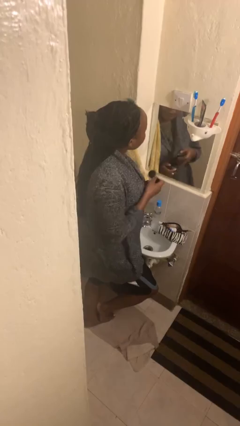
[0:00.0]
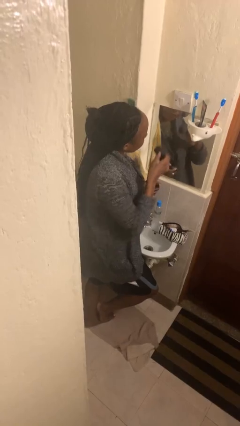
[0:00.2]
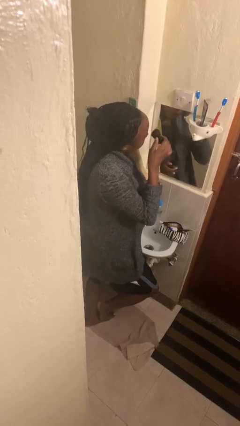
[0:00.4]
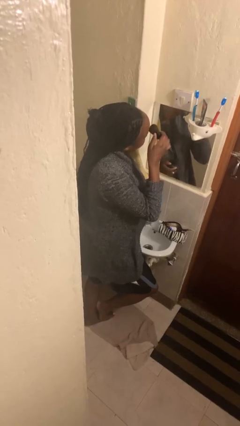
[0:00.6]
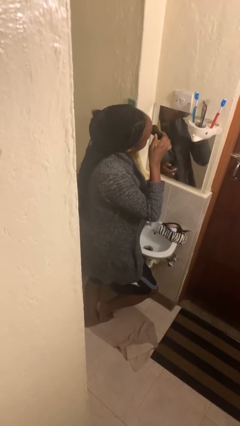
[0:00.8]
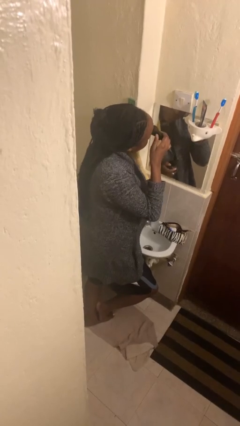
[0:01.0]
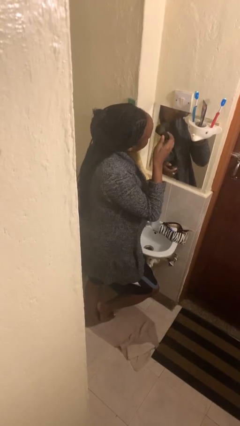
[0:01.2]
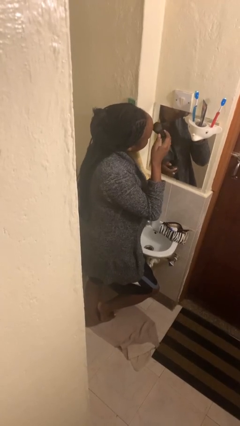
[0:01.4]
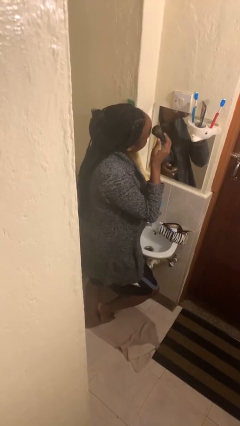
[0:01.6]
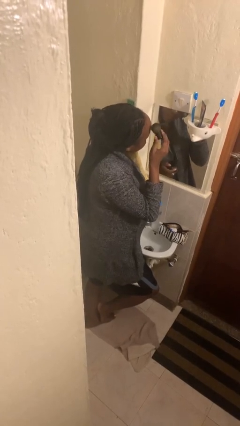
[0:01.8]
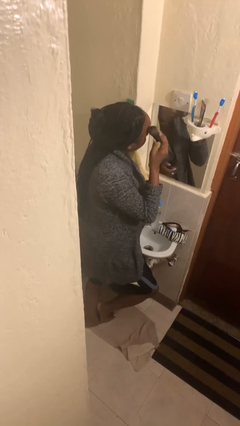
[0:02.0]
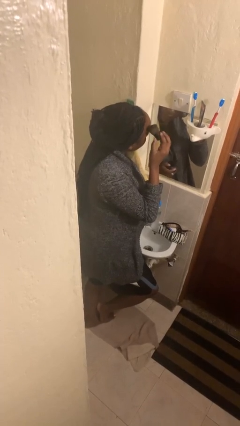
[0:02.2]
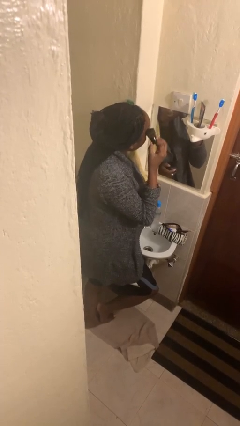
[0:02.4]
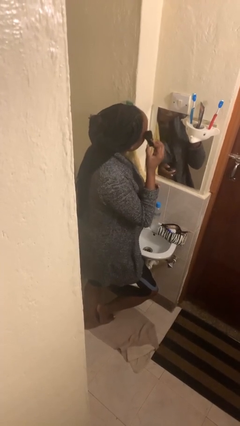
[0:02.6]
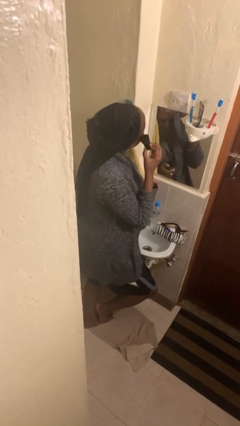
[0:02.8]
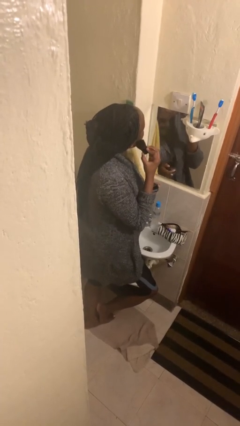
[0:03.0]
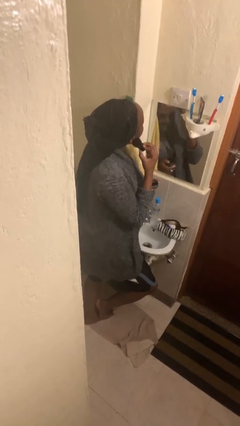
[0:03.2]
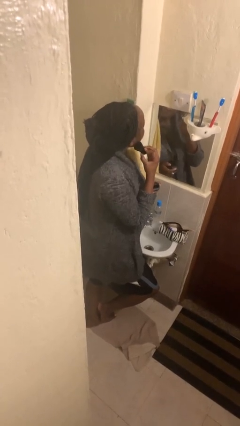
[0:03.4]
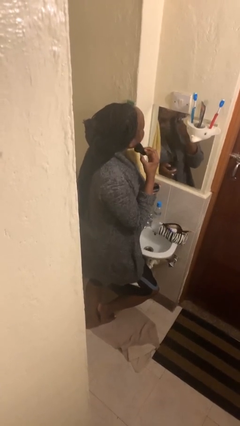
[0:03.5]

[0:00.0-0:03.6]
person applies foundation makeup

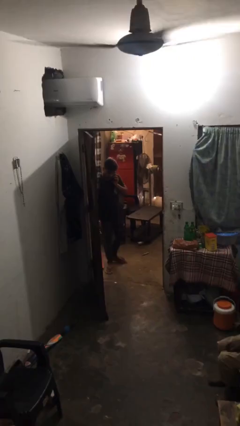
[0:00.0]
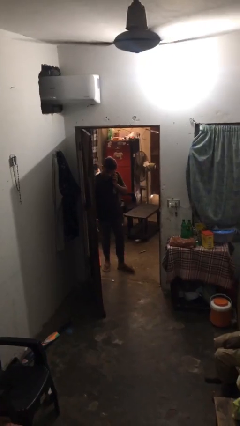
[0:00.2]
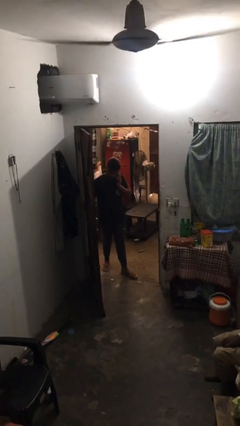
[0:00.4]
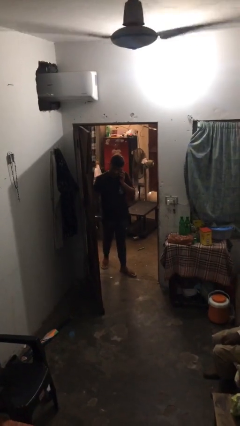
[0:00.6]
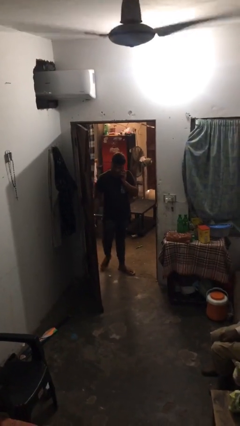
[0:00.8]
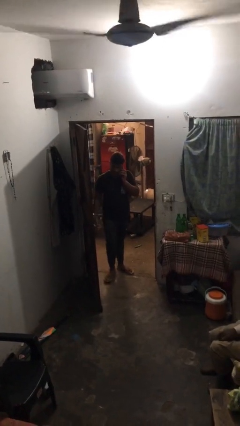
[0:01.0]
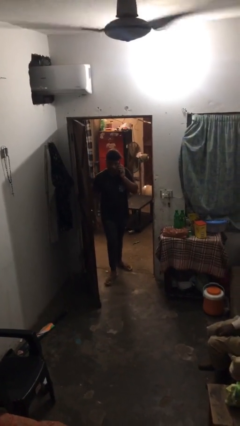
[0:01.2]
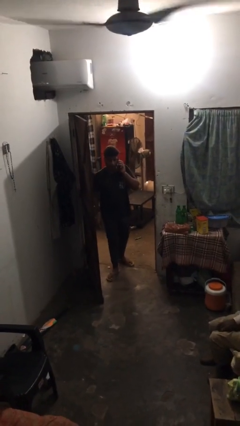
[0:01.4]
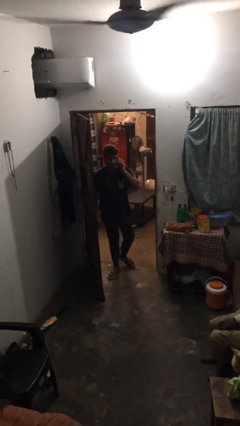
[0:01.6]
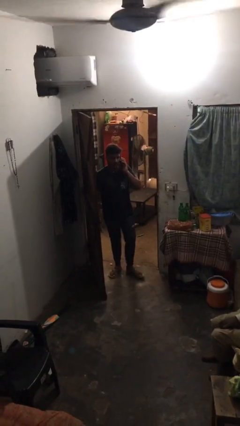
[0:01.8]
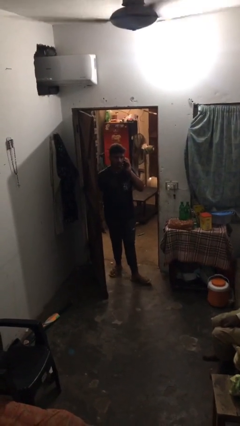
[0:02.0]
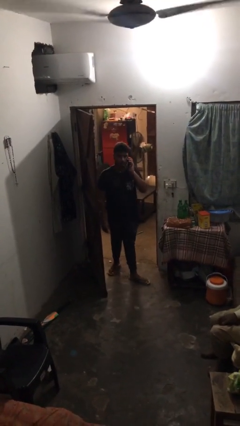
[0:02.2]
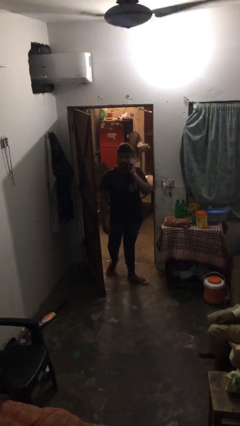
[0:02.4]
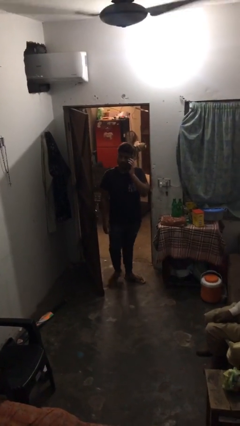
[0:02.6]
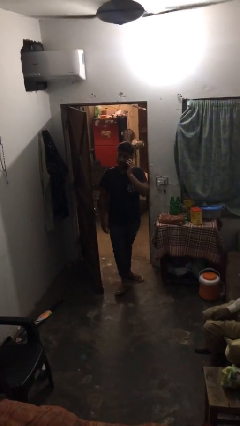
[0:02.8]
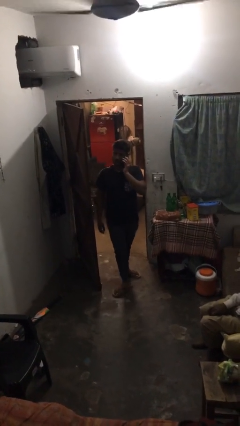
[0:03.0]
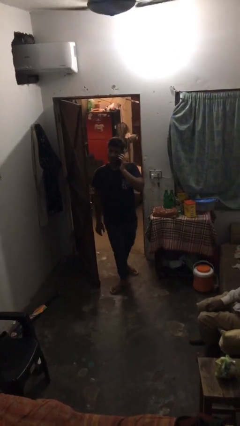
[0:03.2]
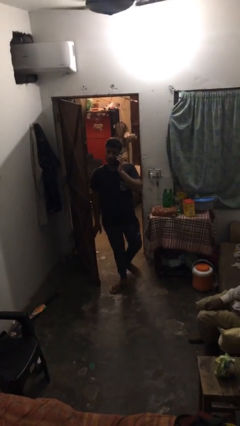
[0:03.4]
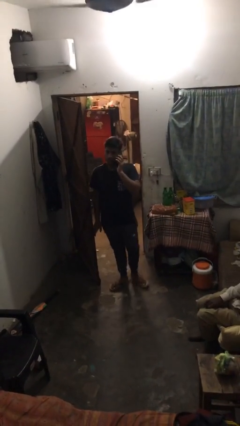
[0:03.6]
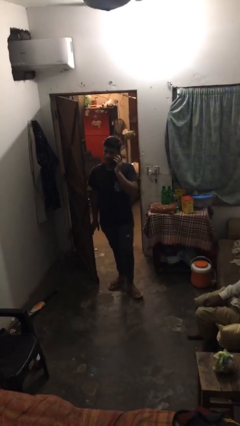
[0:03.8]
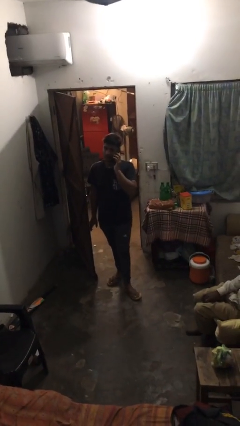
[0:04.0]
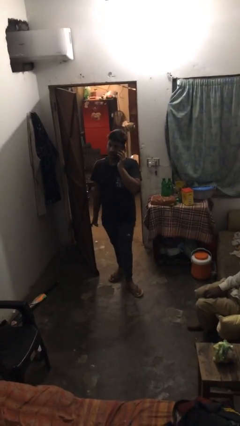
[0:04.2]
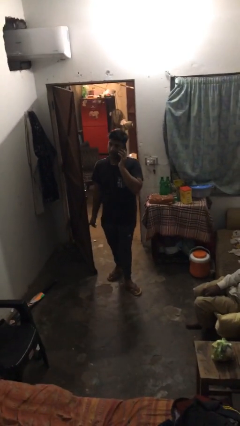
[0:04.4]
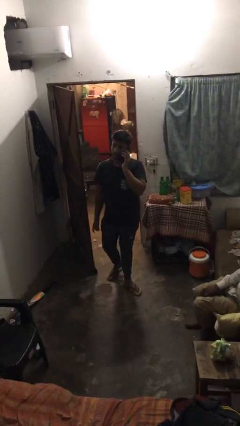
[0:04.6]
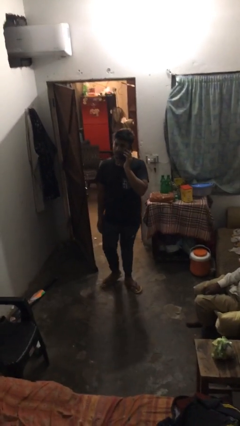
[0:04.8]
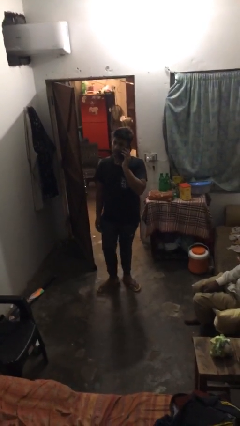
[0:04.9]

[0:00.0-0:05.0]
person enters scene through structure

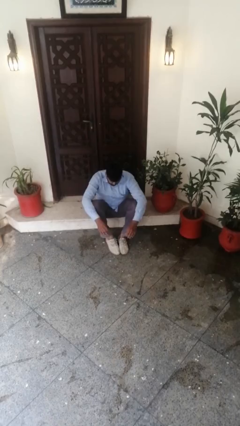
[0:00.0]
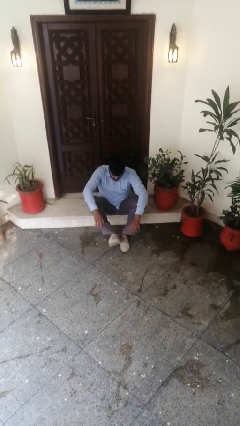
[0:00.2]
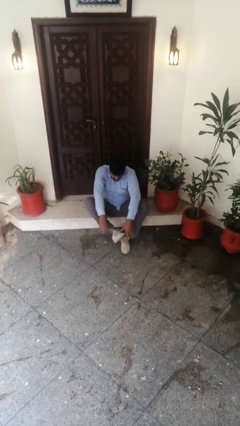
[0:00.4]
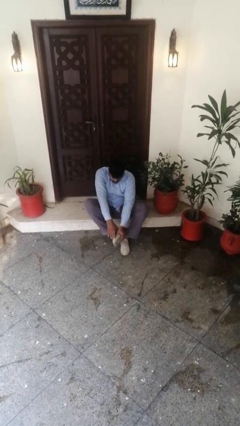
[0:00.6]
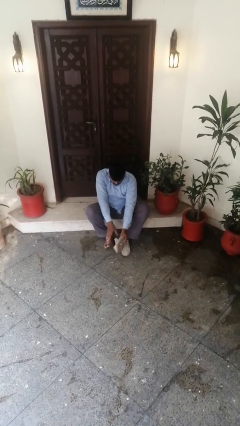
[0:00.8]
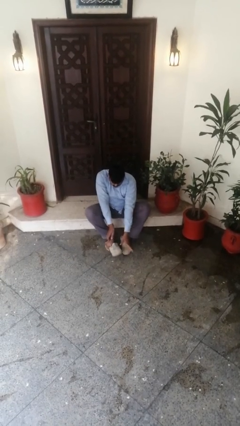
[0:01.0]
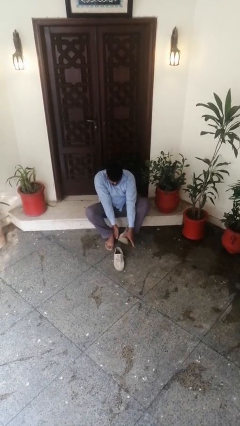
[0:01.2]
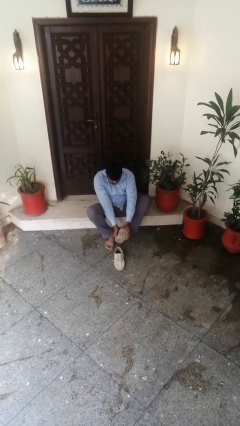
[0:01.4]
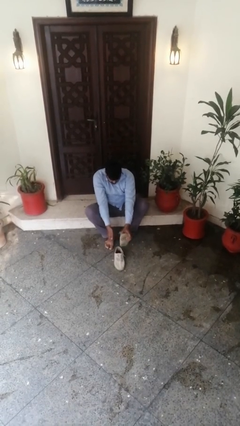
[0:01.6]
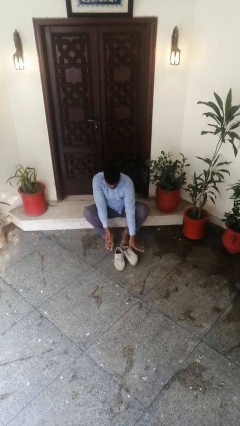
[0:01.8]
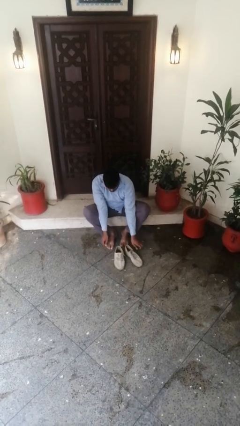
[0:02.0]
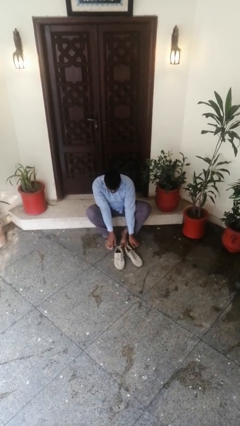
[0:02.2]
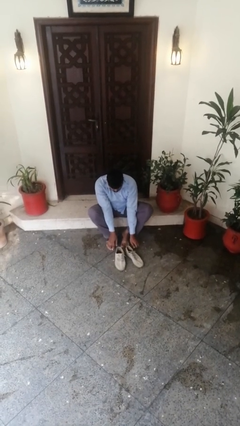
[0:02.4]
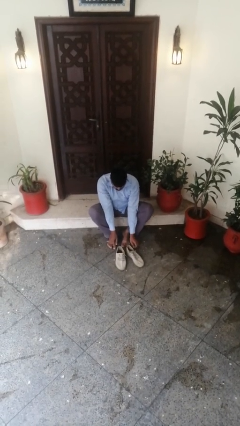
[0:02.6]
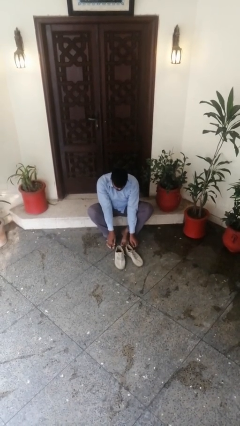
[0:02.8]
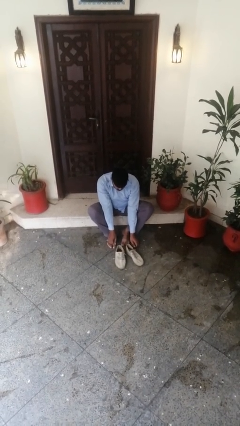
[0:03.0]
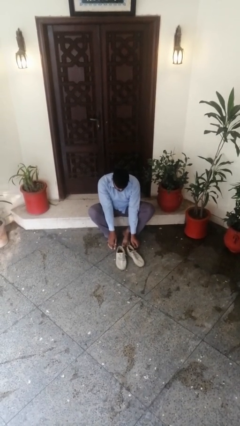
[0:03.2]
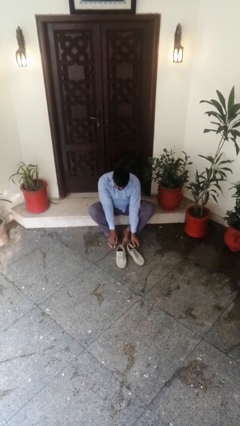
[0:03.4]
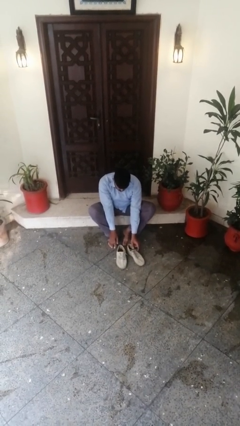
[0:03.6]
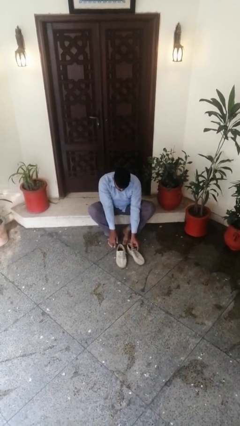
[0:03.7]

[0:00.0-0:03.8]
person takes off shoes

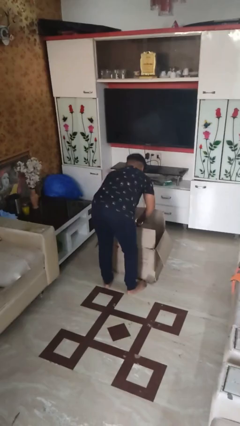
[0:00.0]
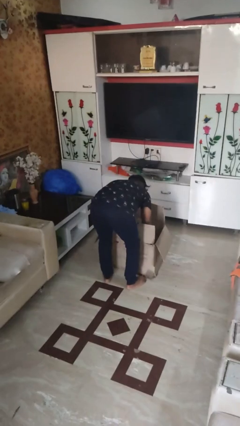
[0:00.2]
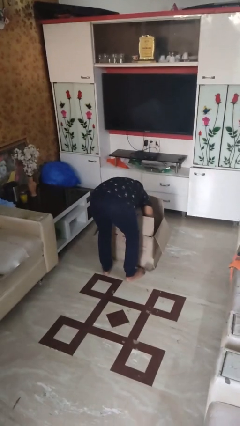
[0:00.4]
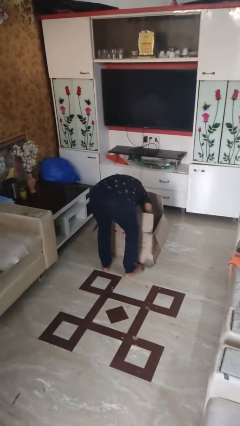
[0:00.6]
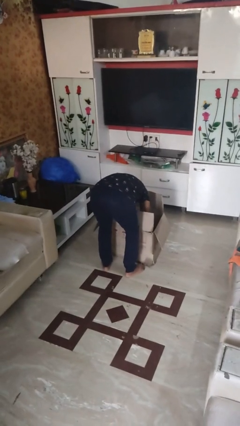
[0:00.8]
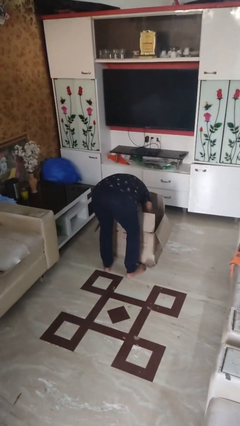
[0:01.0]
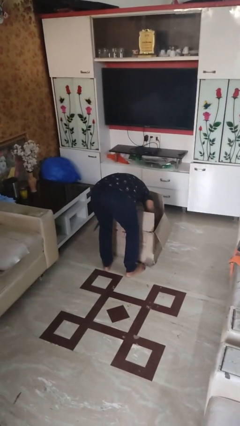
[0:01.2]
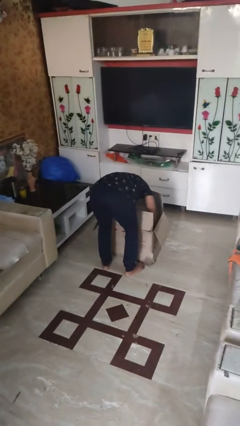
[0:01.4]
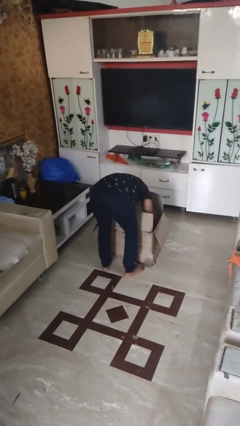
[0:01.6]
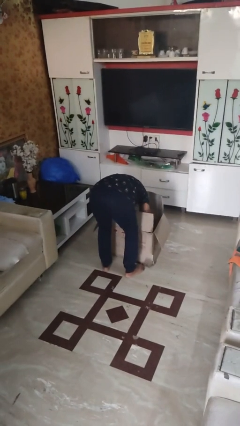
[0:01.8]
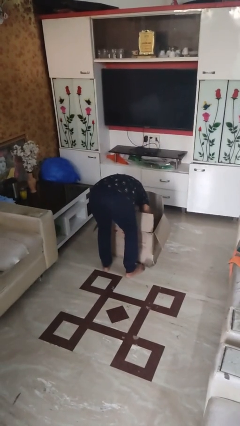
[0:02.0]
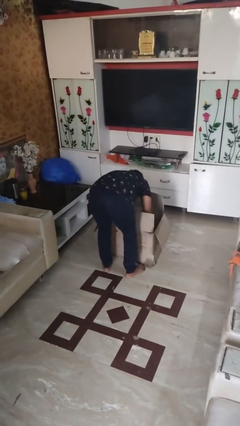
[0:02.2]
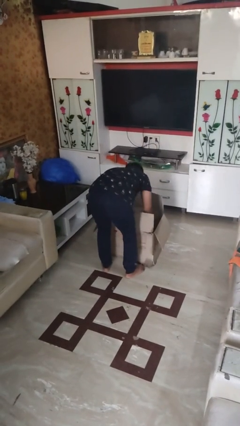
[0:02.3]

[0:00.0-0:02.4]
person searches in box

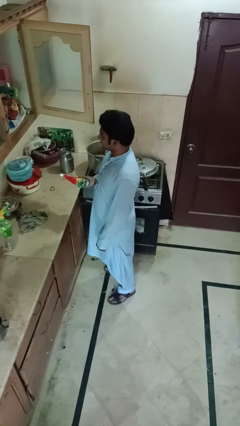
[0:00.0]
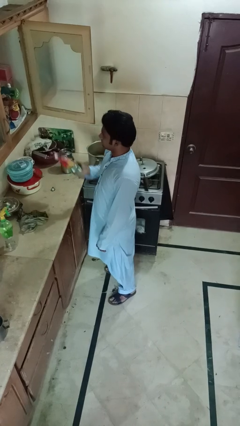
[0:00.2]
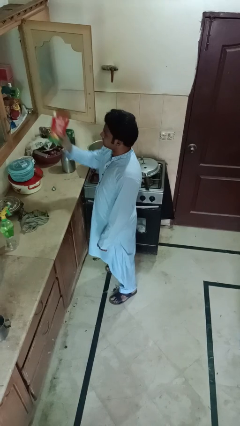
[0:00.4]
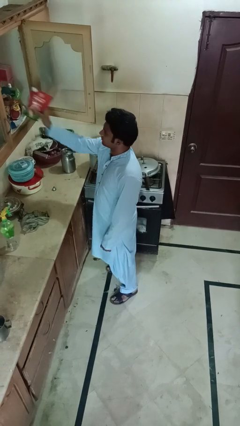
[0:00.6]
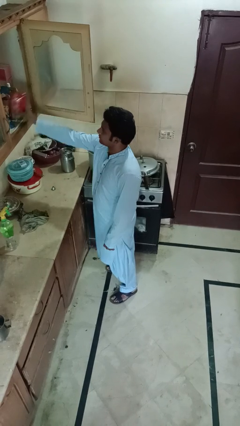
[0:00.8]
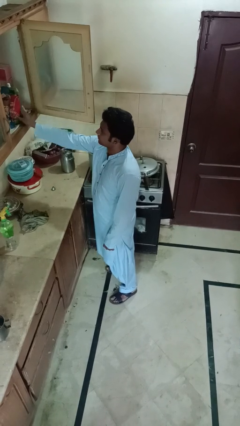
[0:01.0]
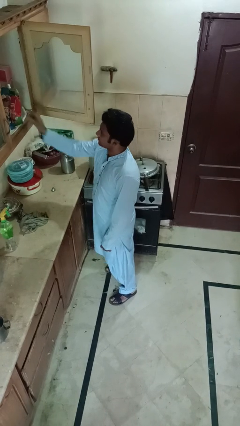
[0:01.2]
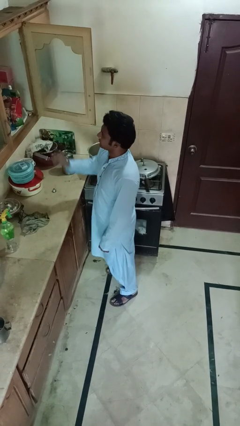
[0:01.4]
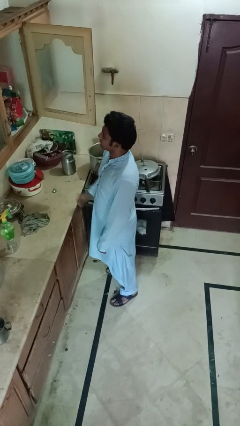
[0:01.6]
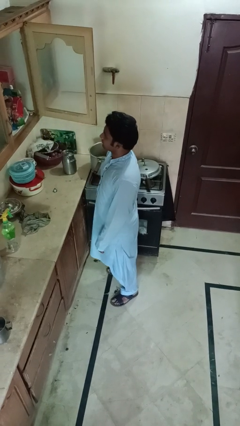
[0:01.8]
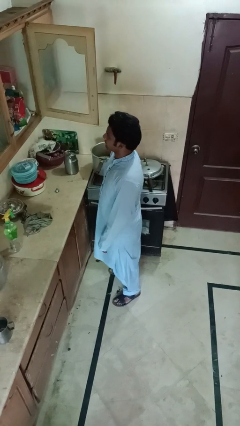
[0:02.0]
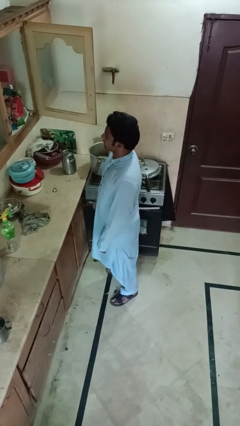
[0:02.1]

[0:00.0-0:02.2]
person puts down object into cabinet

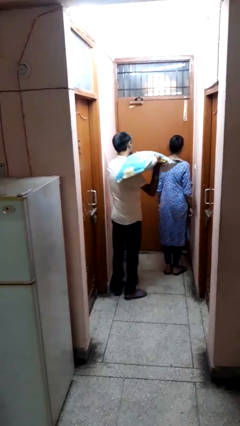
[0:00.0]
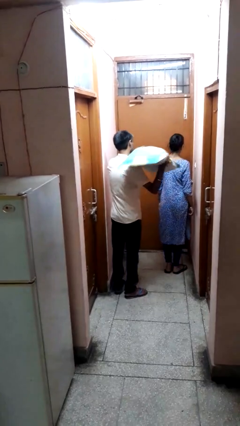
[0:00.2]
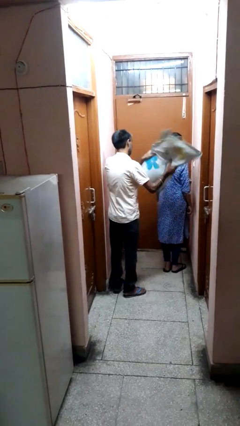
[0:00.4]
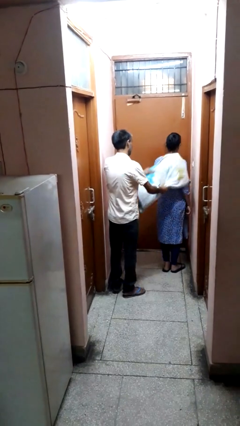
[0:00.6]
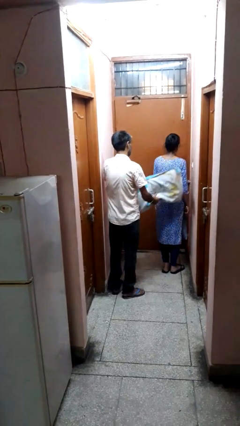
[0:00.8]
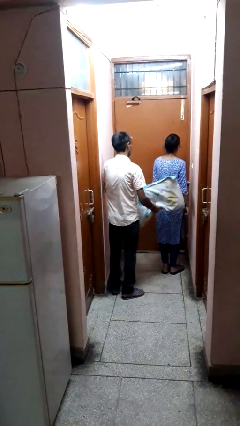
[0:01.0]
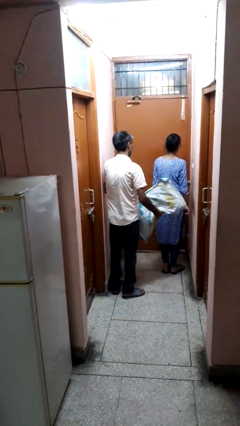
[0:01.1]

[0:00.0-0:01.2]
person hits person with pillow
